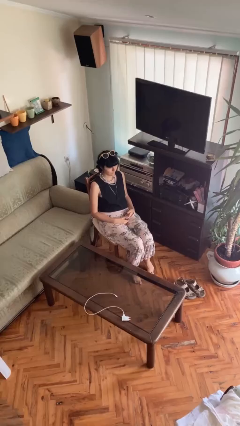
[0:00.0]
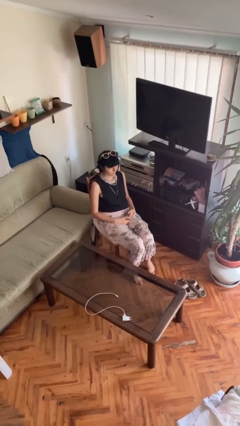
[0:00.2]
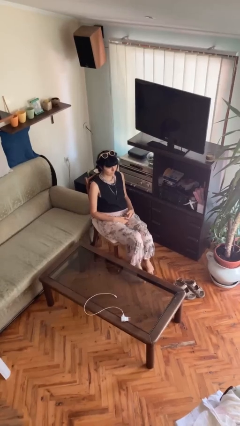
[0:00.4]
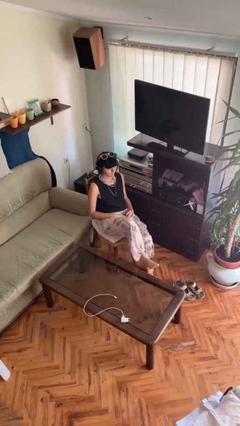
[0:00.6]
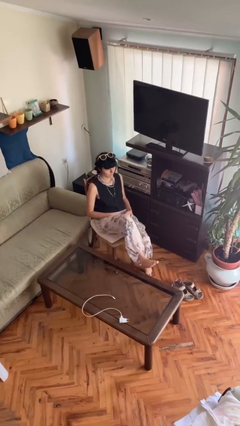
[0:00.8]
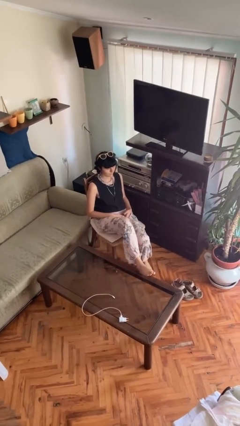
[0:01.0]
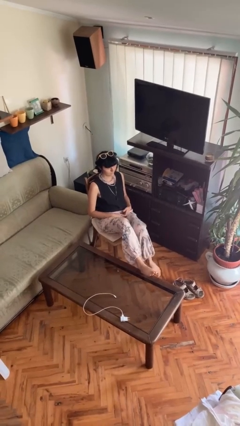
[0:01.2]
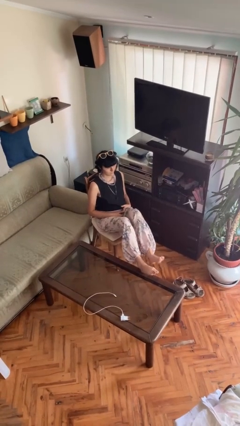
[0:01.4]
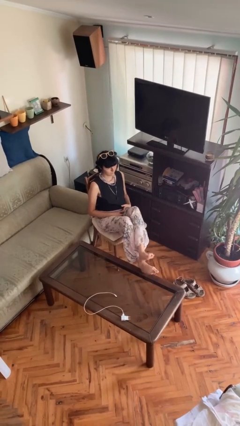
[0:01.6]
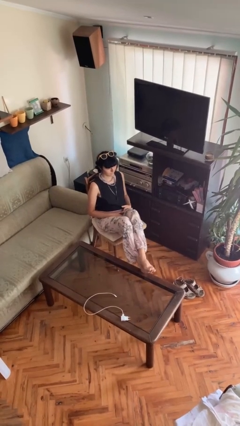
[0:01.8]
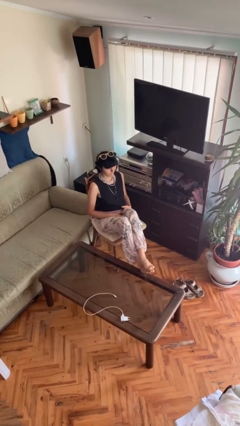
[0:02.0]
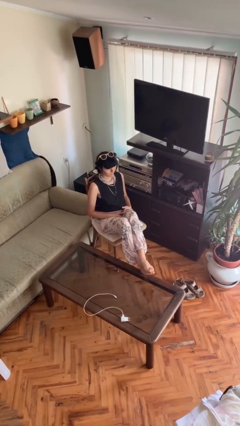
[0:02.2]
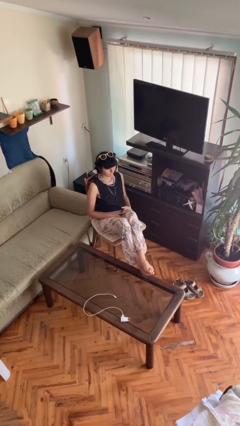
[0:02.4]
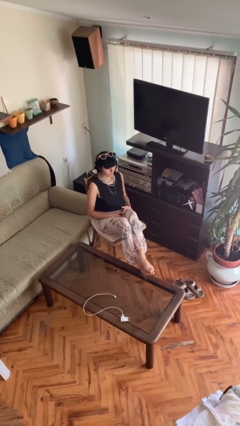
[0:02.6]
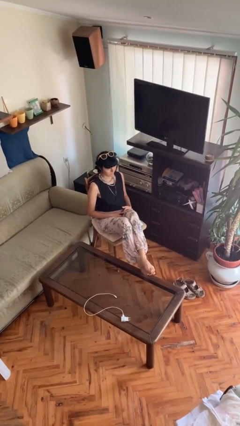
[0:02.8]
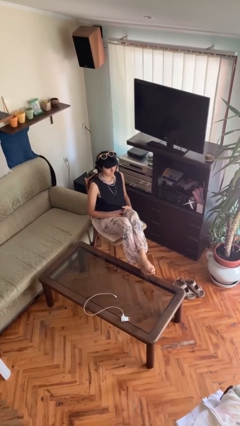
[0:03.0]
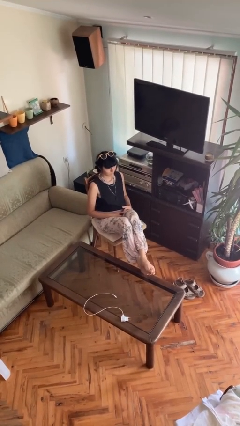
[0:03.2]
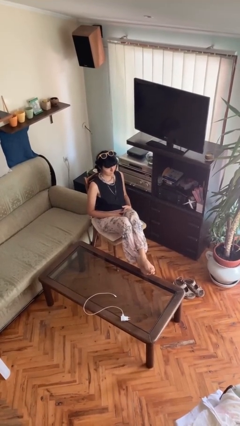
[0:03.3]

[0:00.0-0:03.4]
person puts feet up

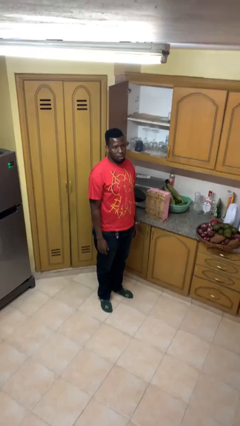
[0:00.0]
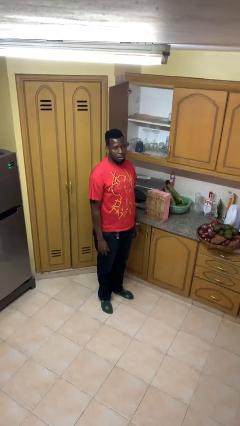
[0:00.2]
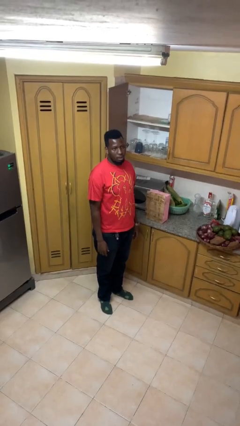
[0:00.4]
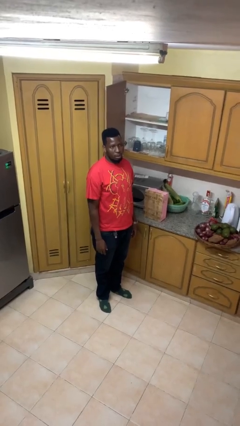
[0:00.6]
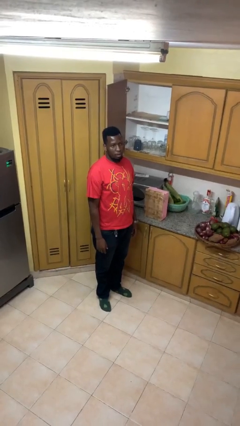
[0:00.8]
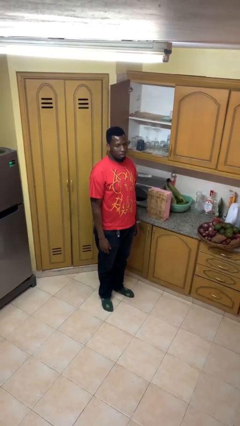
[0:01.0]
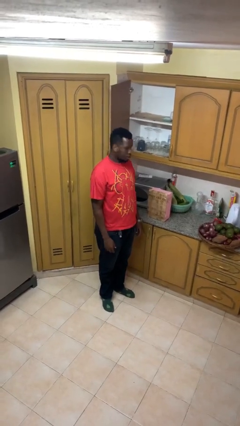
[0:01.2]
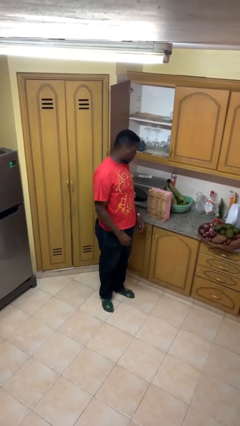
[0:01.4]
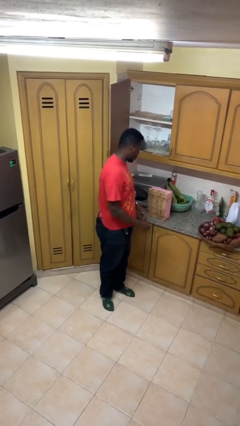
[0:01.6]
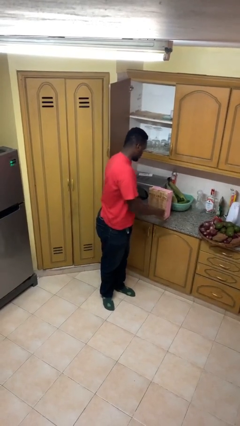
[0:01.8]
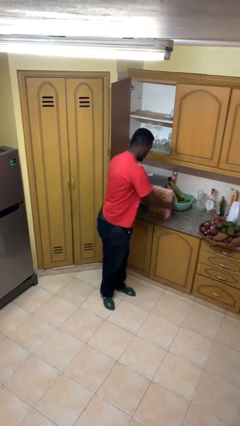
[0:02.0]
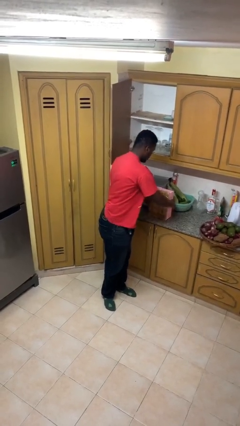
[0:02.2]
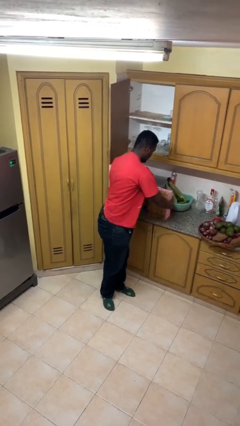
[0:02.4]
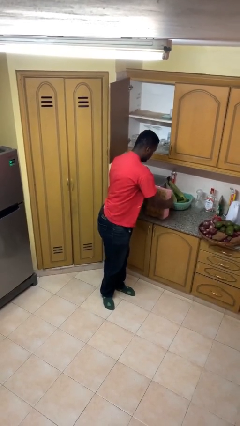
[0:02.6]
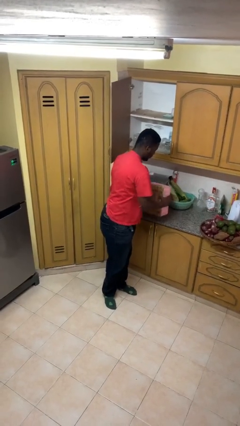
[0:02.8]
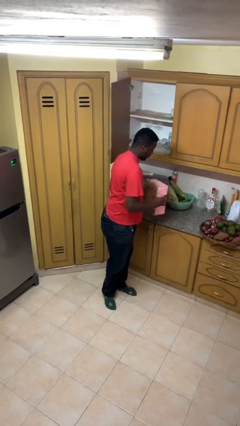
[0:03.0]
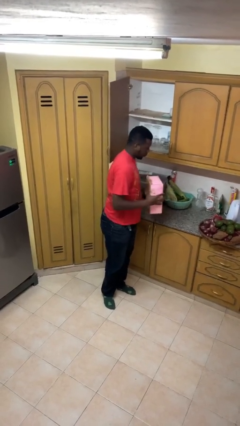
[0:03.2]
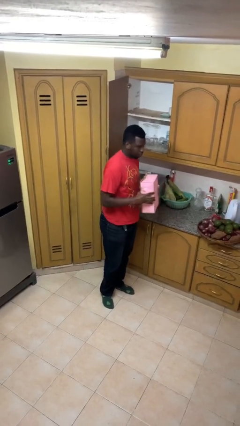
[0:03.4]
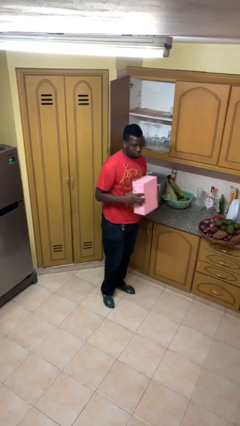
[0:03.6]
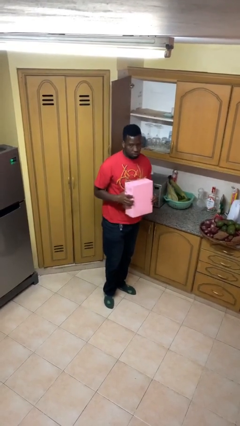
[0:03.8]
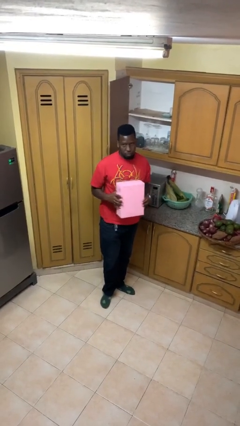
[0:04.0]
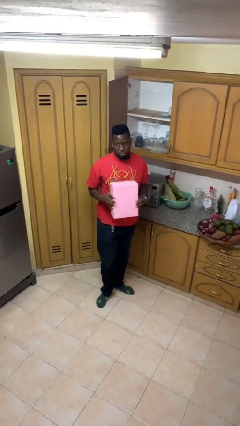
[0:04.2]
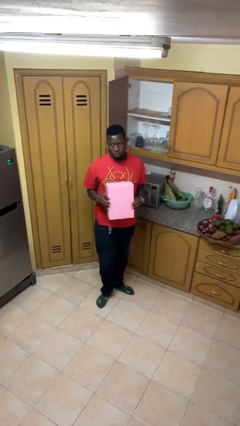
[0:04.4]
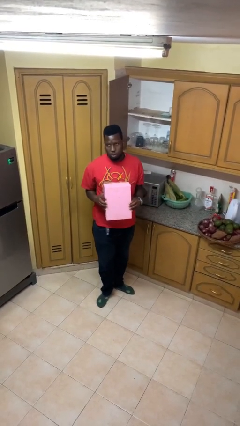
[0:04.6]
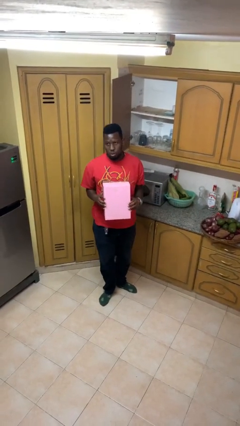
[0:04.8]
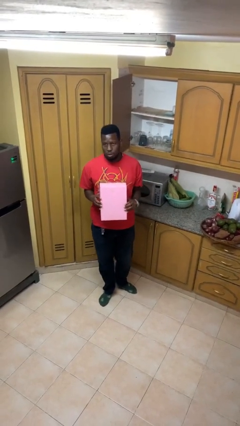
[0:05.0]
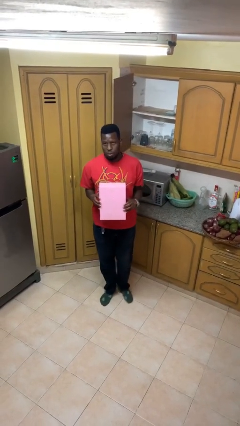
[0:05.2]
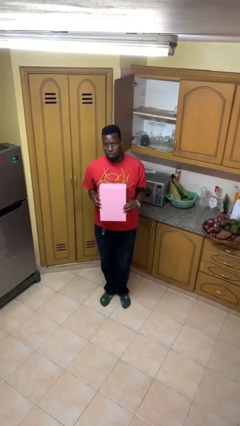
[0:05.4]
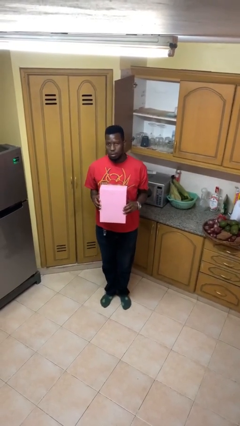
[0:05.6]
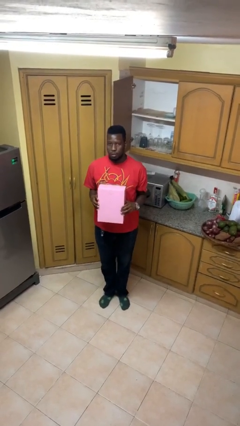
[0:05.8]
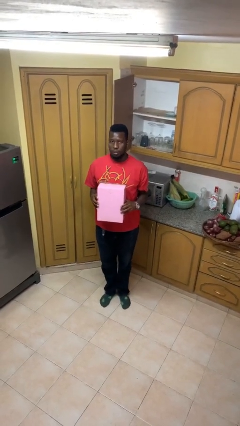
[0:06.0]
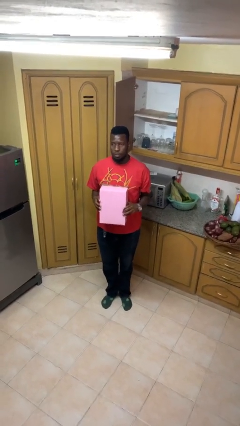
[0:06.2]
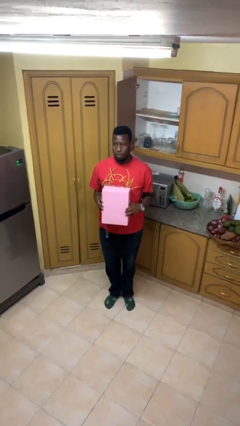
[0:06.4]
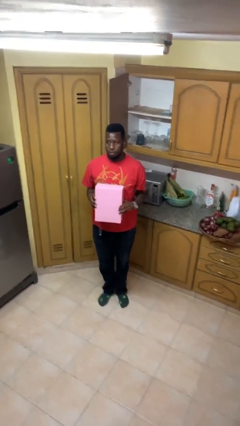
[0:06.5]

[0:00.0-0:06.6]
person picks up object from table

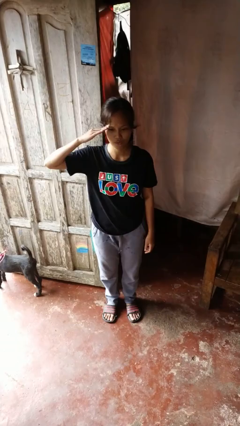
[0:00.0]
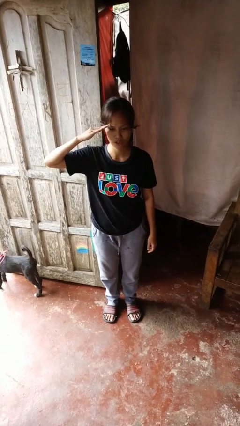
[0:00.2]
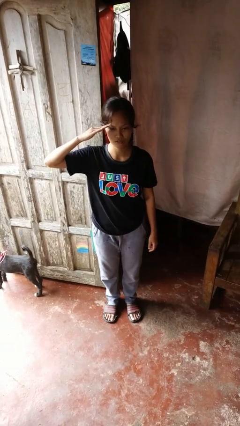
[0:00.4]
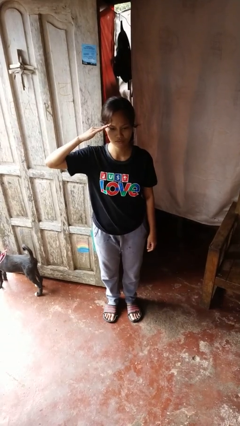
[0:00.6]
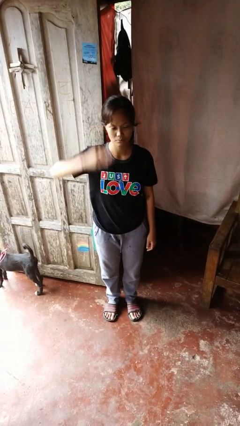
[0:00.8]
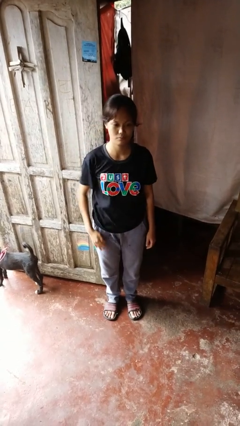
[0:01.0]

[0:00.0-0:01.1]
person salutes

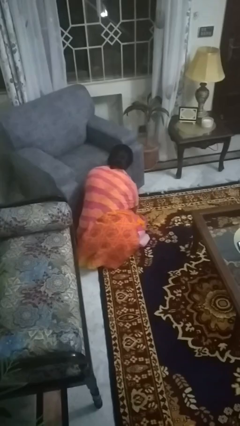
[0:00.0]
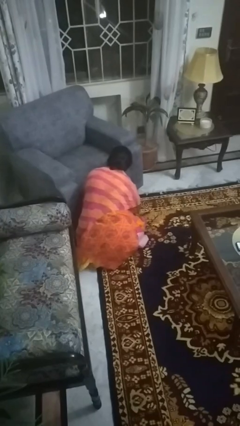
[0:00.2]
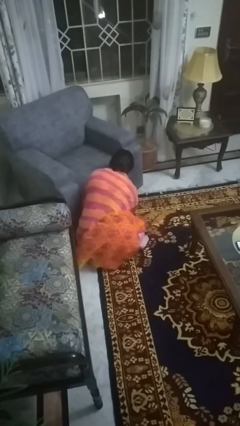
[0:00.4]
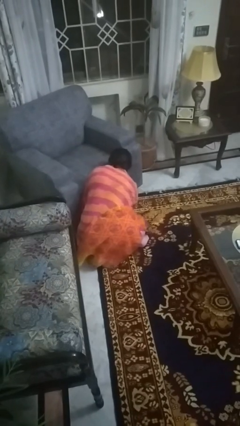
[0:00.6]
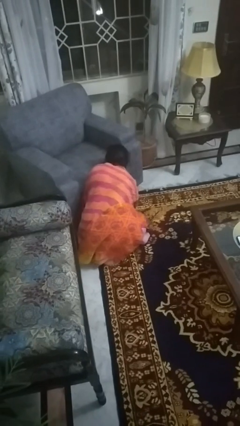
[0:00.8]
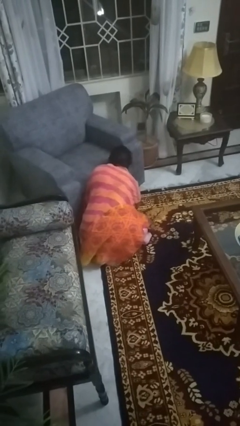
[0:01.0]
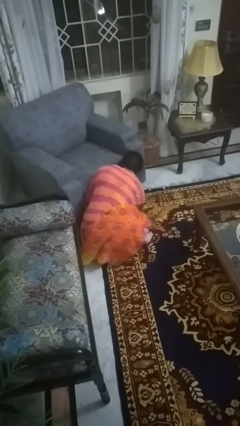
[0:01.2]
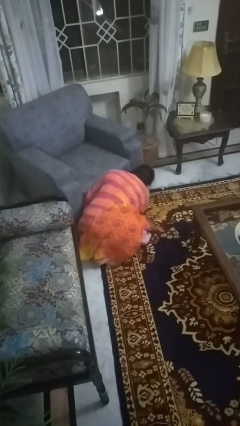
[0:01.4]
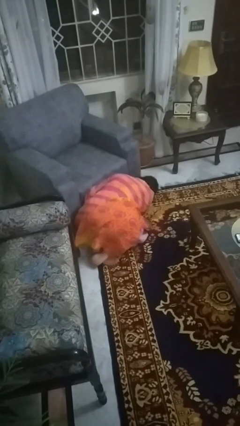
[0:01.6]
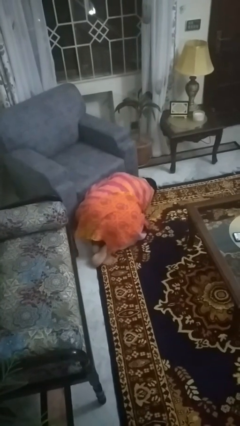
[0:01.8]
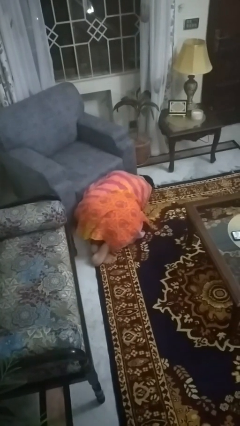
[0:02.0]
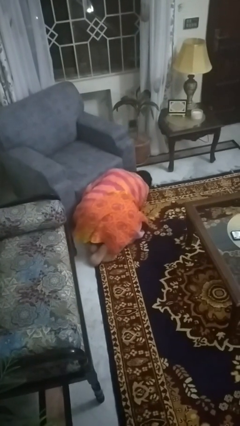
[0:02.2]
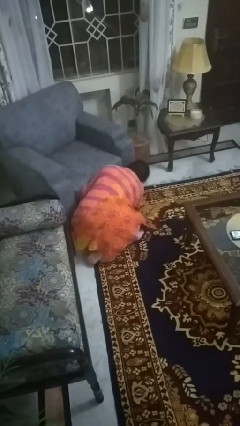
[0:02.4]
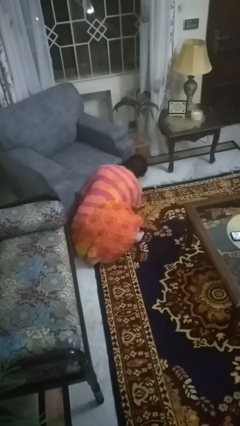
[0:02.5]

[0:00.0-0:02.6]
person searches under couch

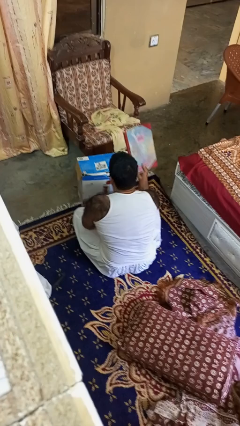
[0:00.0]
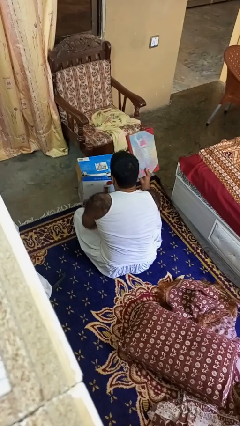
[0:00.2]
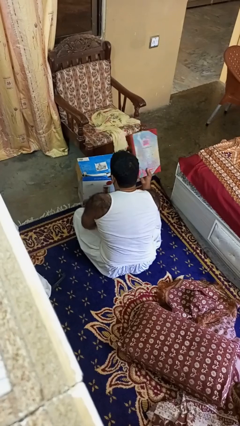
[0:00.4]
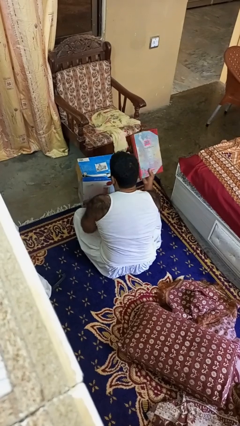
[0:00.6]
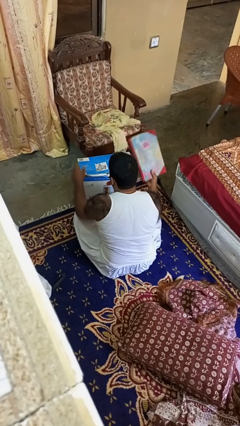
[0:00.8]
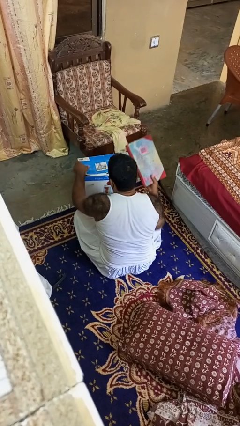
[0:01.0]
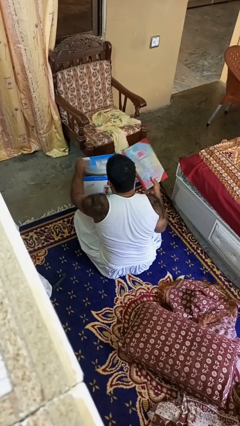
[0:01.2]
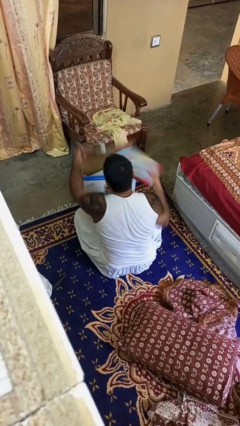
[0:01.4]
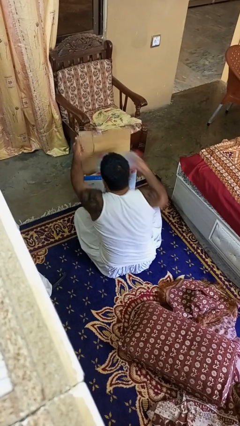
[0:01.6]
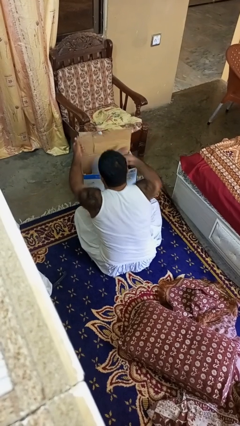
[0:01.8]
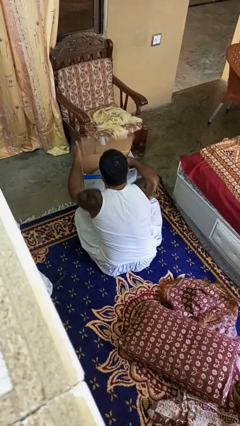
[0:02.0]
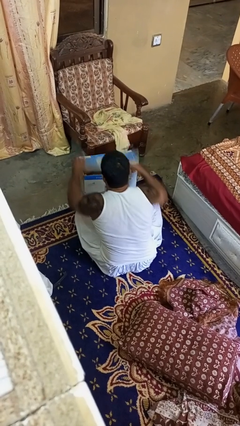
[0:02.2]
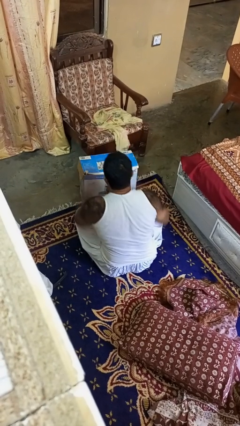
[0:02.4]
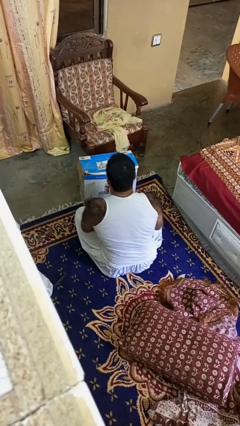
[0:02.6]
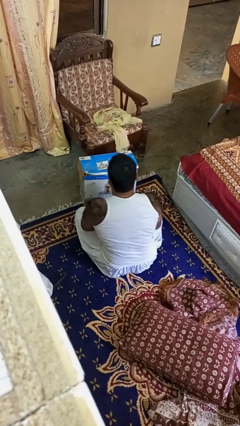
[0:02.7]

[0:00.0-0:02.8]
person puts object into box

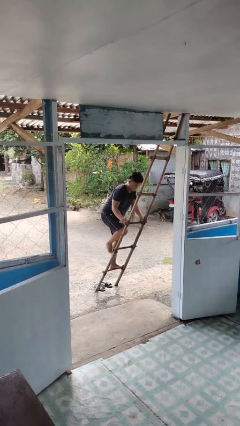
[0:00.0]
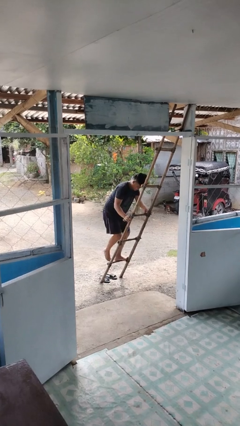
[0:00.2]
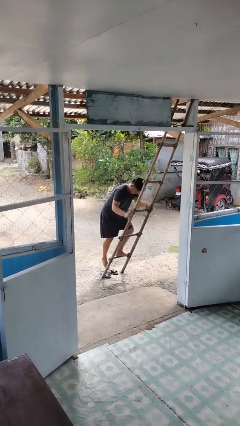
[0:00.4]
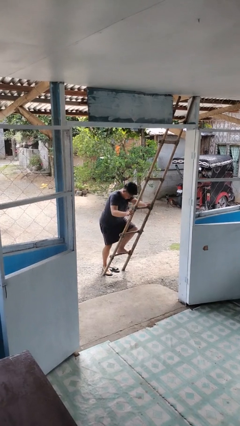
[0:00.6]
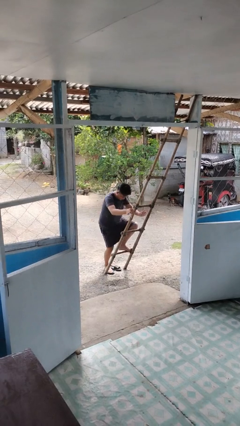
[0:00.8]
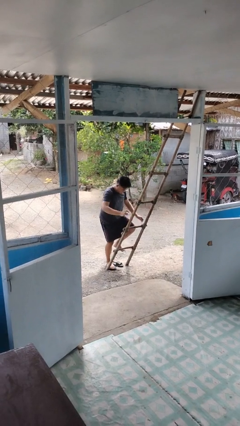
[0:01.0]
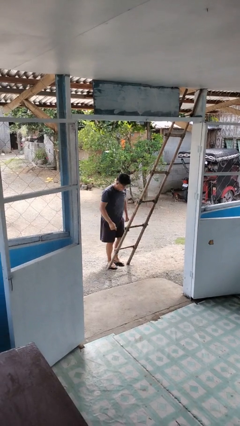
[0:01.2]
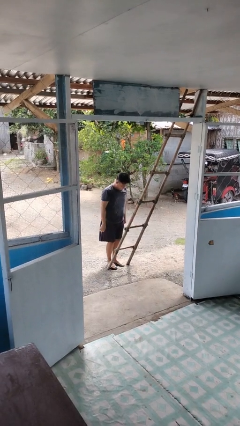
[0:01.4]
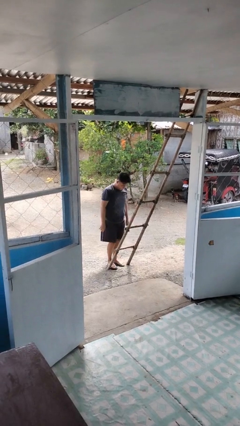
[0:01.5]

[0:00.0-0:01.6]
person climbs down ladder
